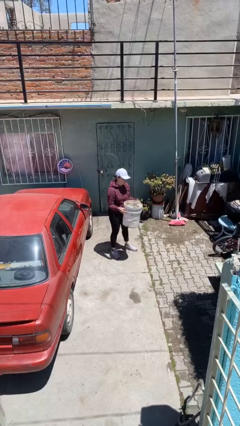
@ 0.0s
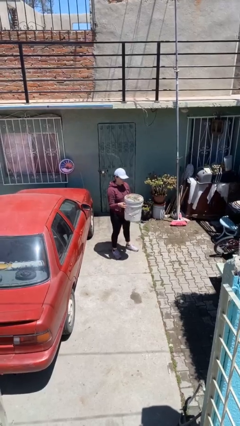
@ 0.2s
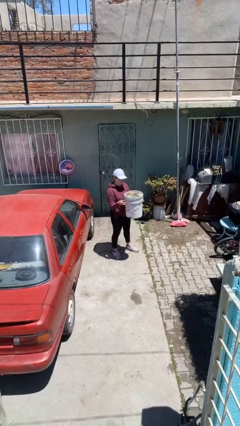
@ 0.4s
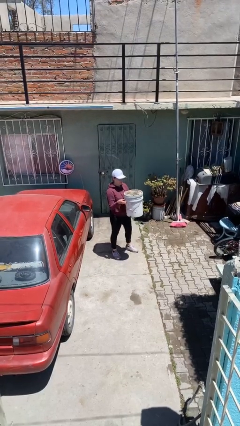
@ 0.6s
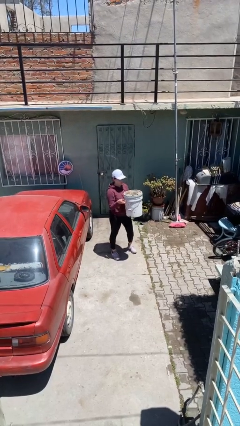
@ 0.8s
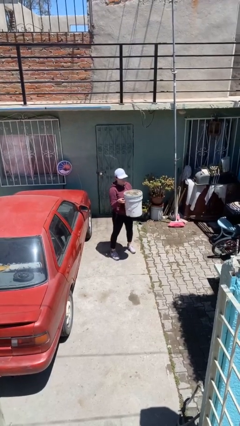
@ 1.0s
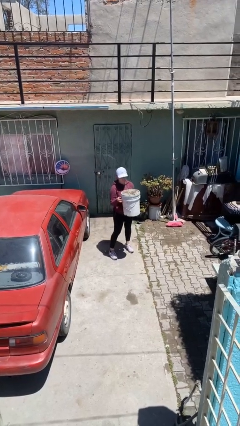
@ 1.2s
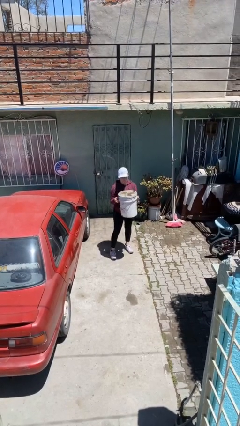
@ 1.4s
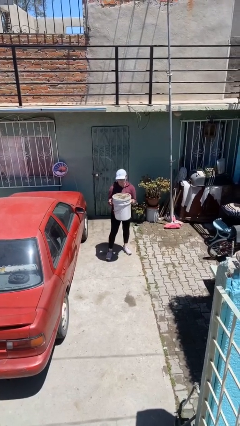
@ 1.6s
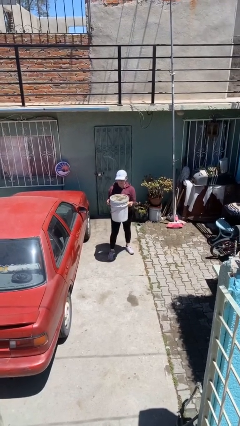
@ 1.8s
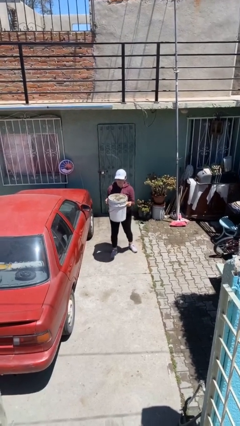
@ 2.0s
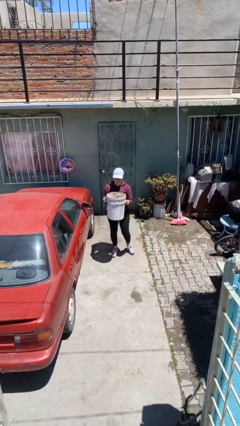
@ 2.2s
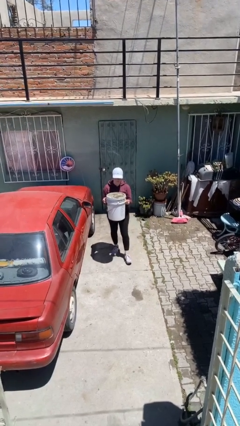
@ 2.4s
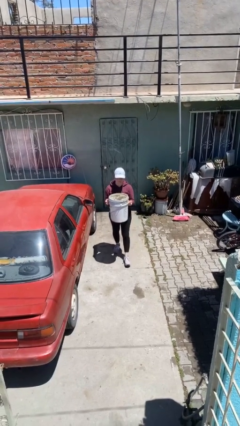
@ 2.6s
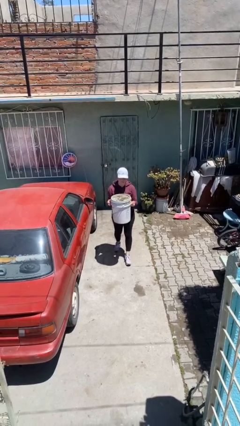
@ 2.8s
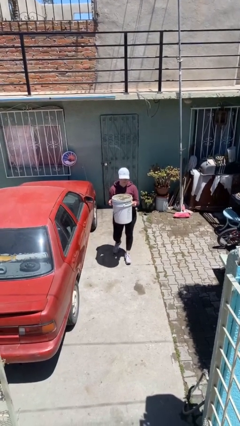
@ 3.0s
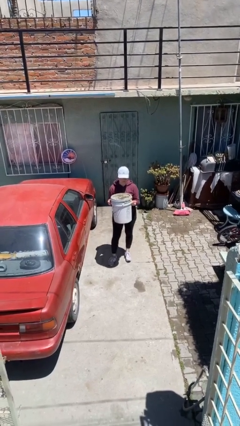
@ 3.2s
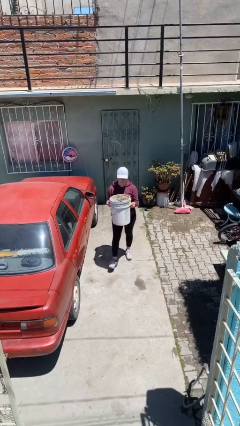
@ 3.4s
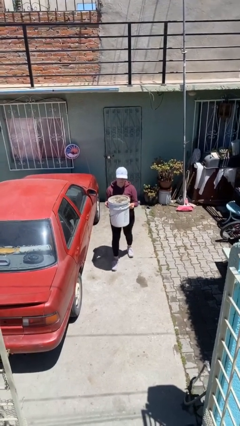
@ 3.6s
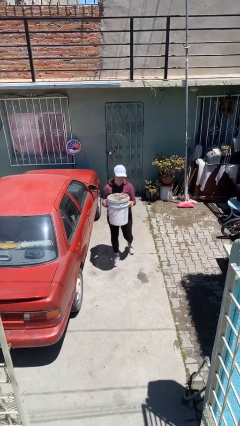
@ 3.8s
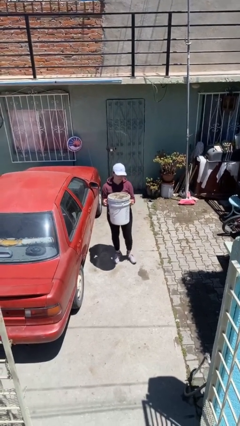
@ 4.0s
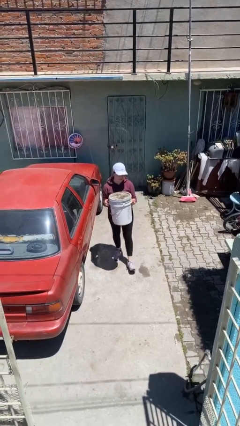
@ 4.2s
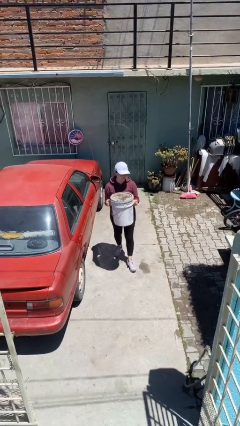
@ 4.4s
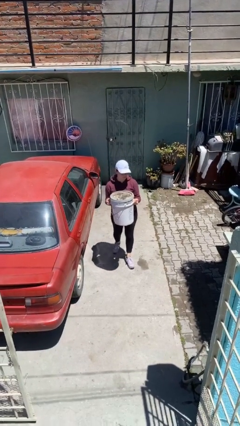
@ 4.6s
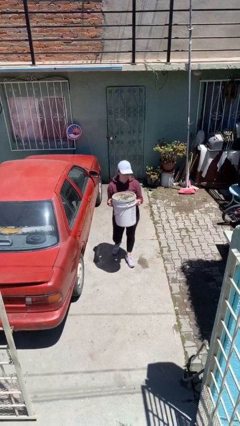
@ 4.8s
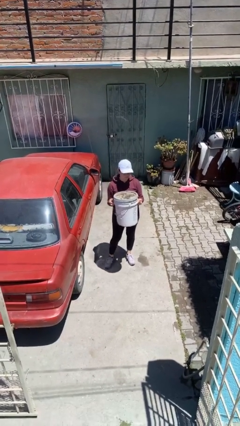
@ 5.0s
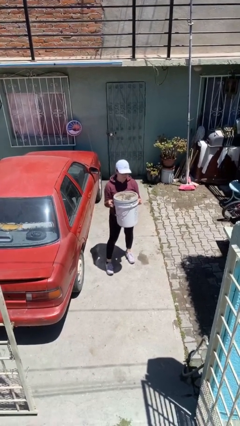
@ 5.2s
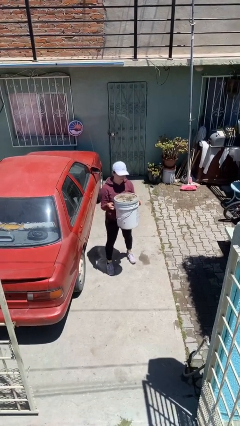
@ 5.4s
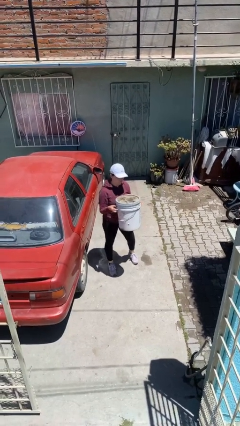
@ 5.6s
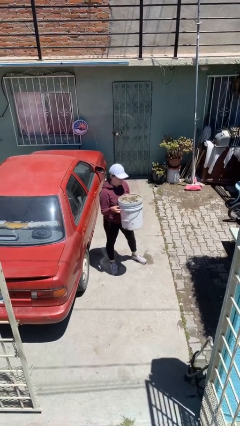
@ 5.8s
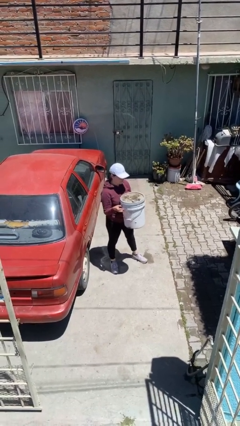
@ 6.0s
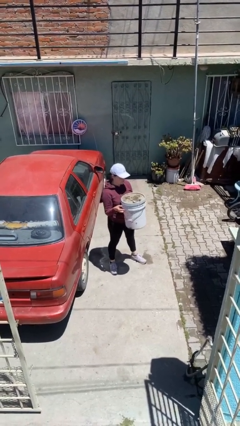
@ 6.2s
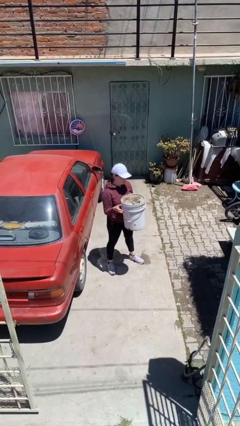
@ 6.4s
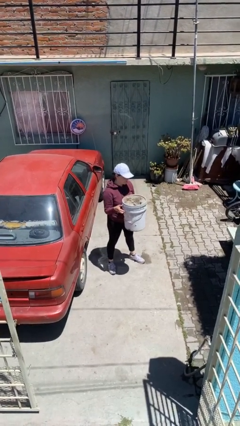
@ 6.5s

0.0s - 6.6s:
person carries heavy object

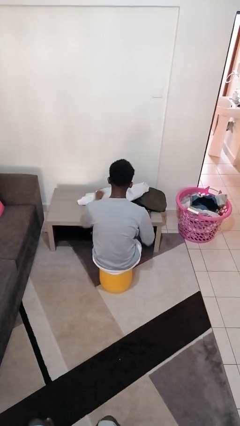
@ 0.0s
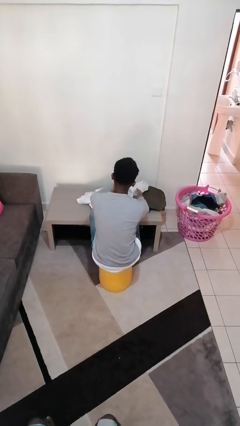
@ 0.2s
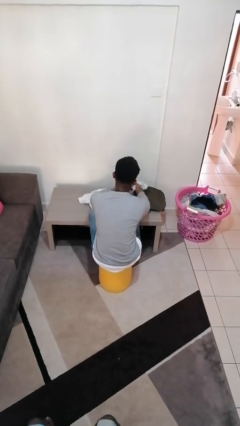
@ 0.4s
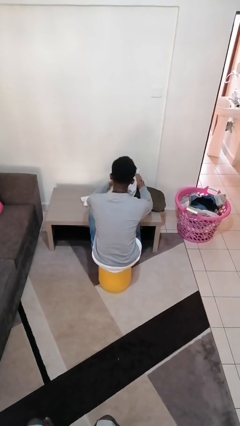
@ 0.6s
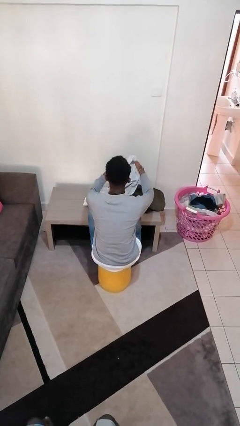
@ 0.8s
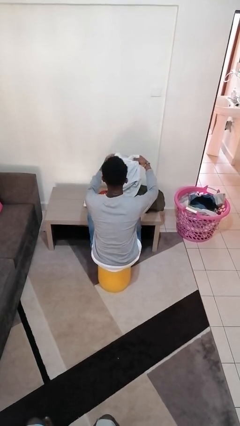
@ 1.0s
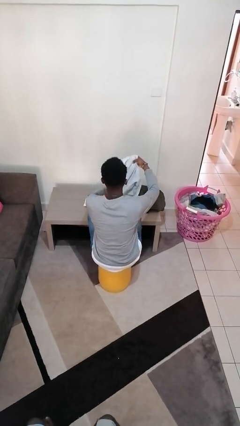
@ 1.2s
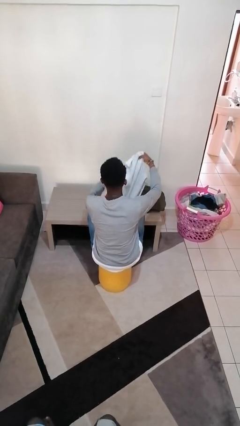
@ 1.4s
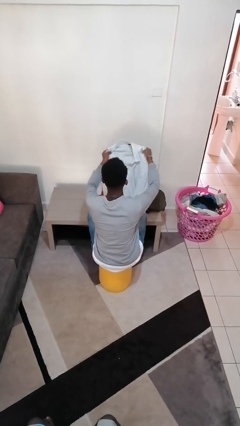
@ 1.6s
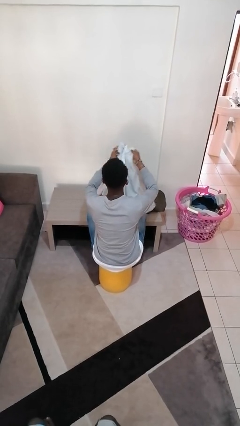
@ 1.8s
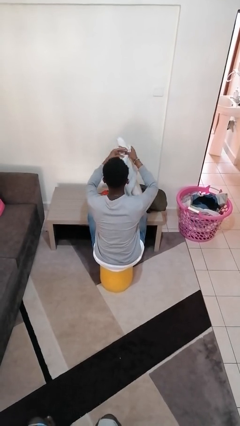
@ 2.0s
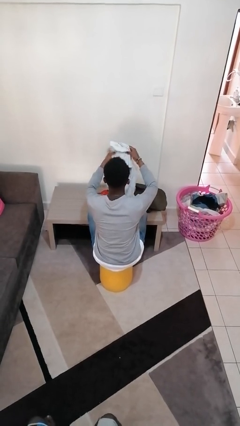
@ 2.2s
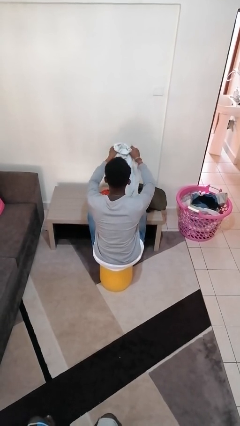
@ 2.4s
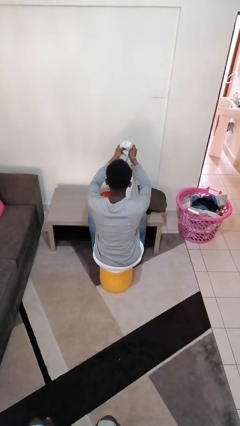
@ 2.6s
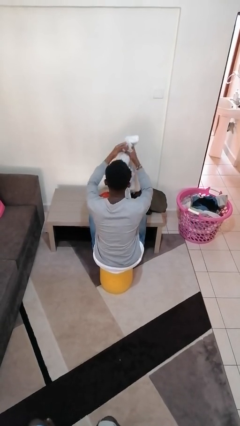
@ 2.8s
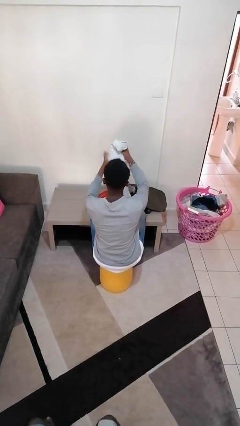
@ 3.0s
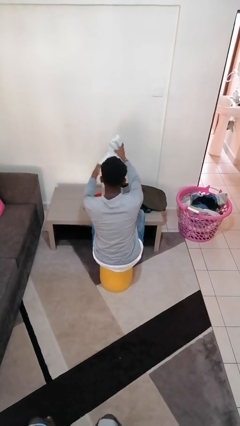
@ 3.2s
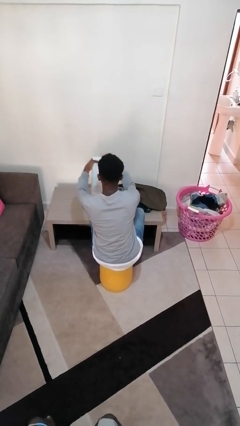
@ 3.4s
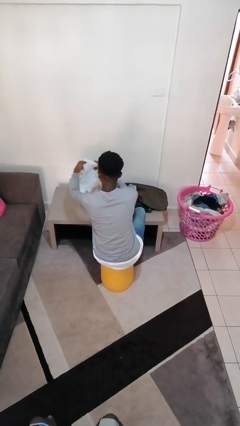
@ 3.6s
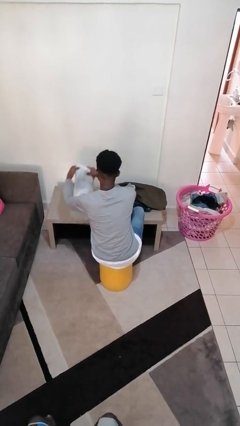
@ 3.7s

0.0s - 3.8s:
person folds shirt

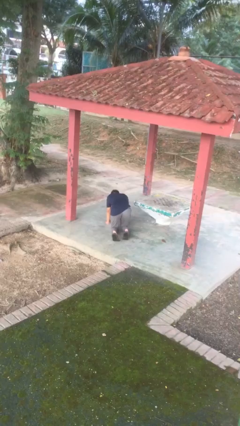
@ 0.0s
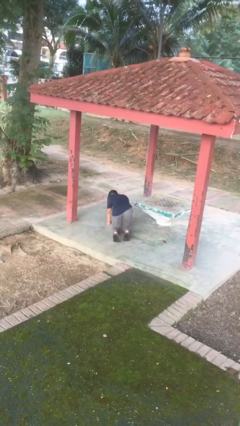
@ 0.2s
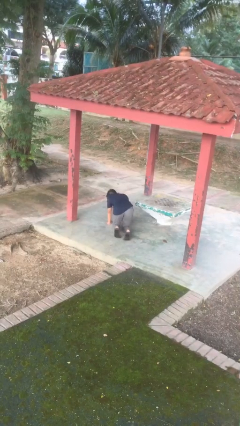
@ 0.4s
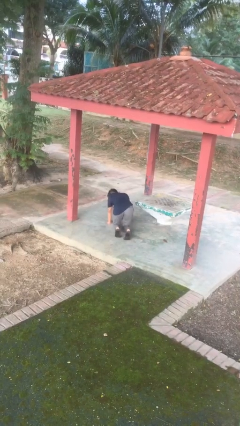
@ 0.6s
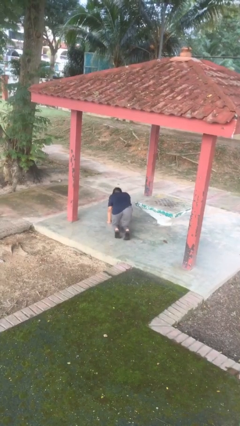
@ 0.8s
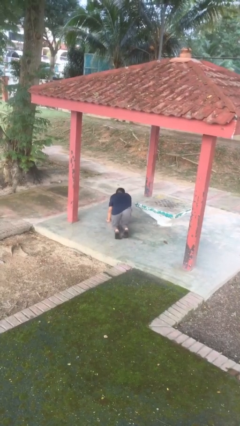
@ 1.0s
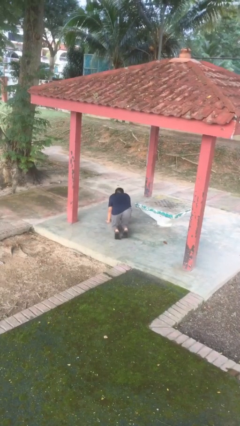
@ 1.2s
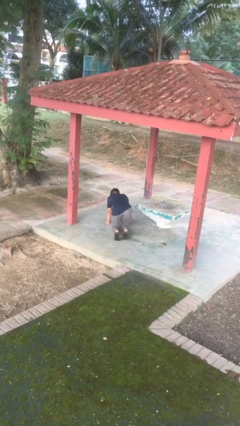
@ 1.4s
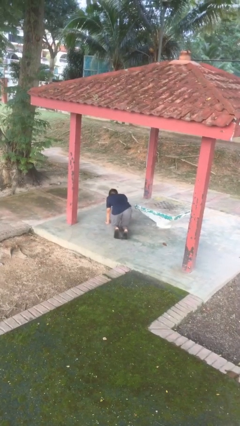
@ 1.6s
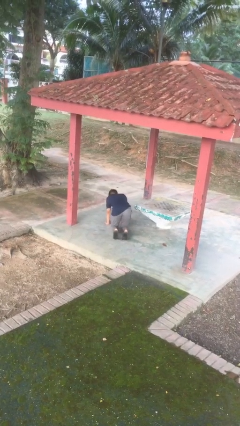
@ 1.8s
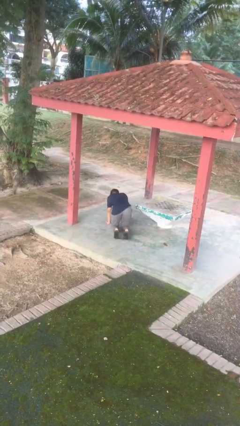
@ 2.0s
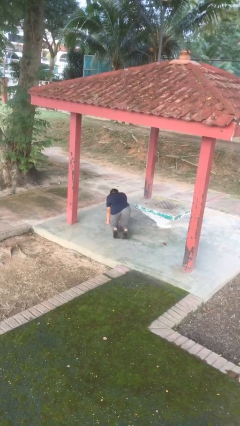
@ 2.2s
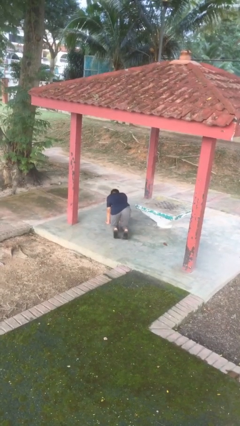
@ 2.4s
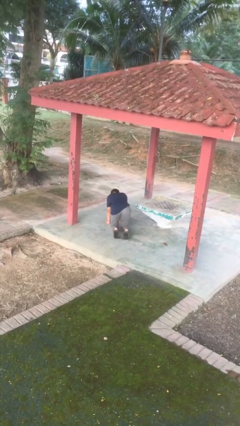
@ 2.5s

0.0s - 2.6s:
person crawls

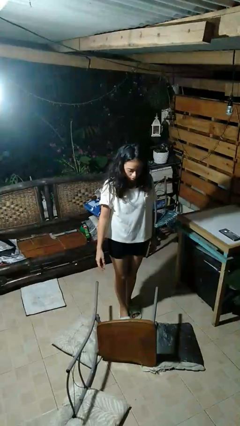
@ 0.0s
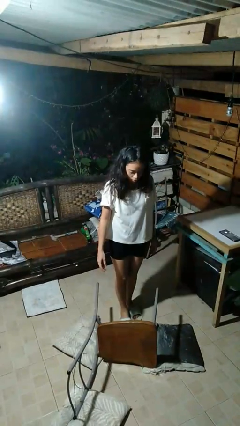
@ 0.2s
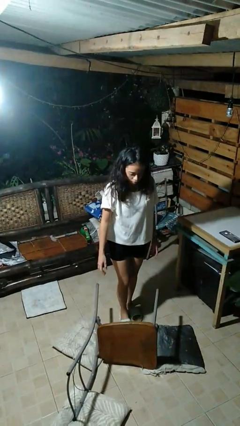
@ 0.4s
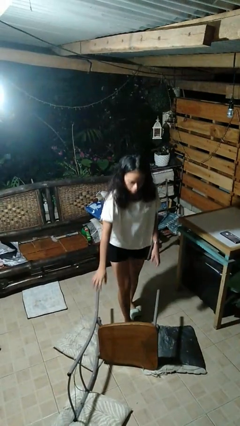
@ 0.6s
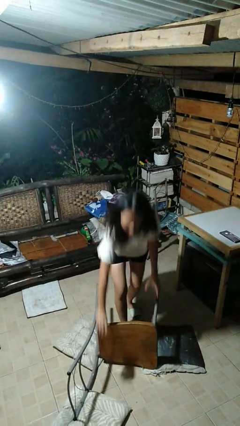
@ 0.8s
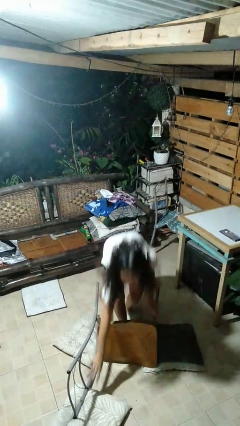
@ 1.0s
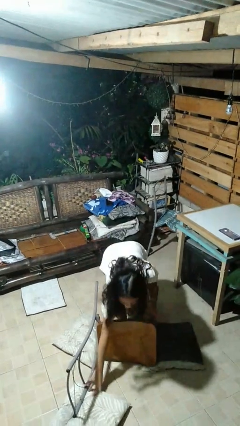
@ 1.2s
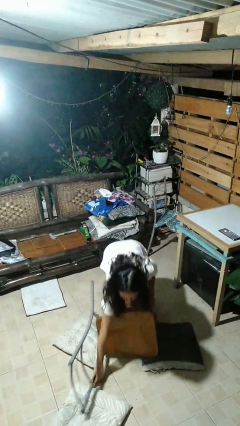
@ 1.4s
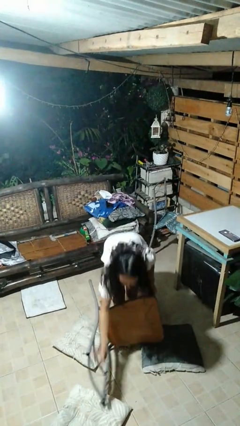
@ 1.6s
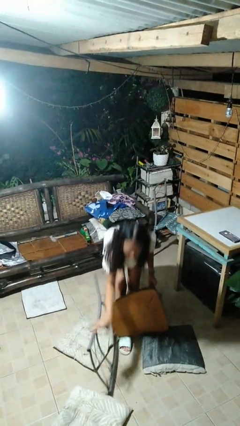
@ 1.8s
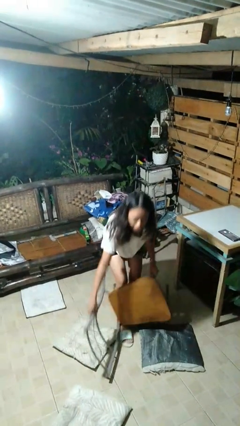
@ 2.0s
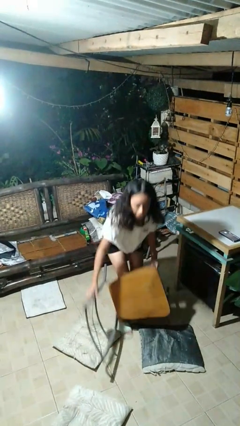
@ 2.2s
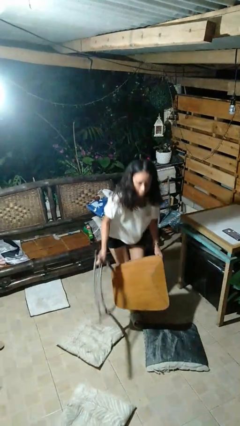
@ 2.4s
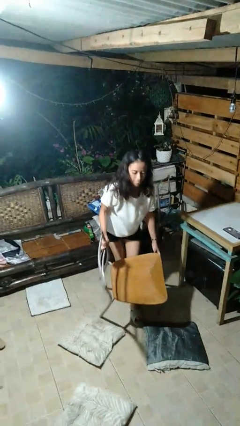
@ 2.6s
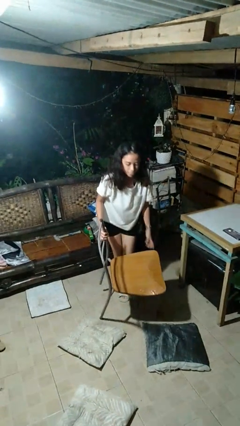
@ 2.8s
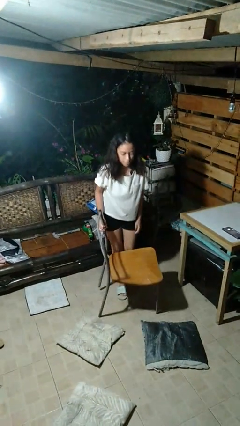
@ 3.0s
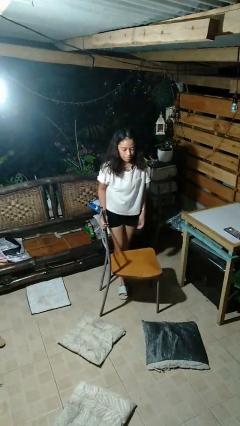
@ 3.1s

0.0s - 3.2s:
person sets upright furniture

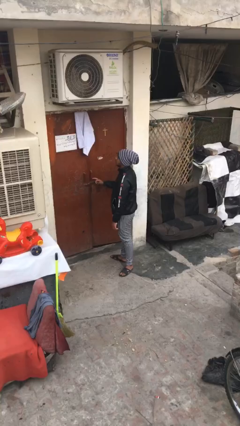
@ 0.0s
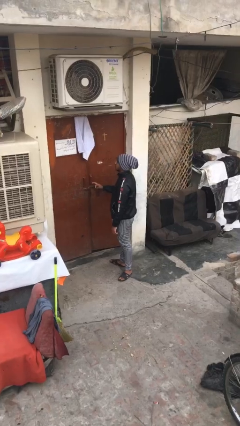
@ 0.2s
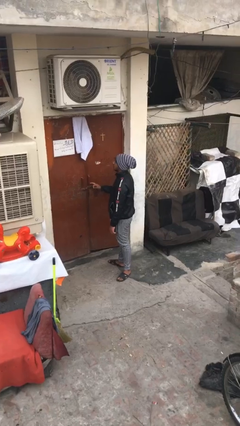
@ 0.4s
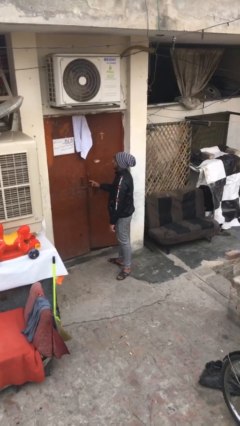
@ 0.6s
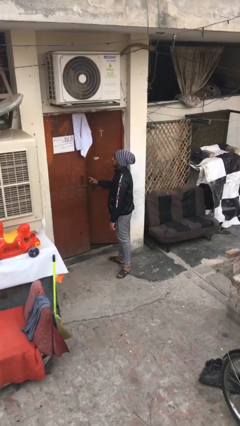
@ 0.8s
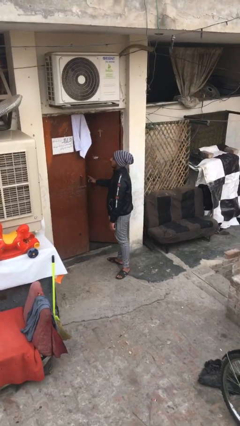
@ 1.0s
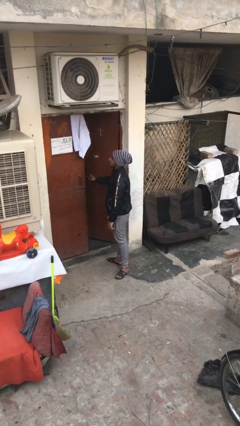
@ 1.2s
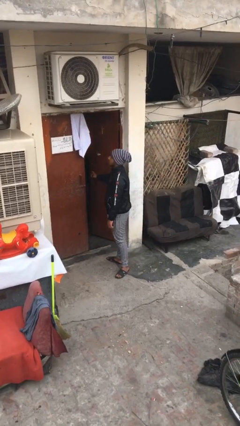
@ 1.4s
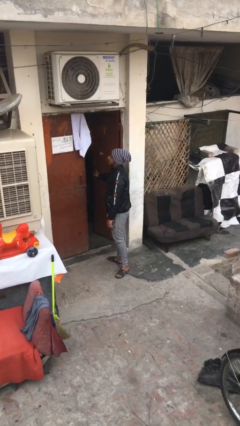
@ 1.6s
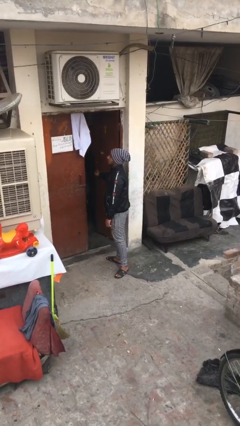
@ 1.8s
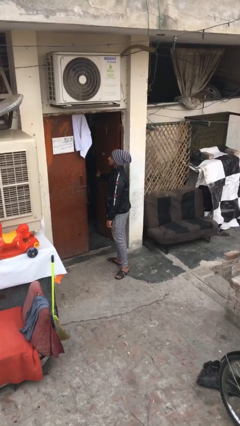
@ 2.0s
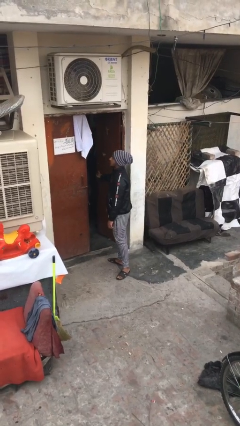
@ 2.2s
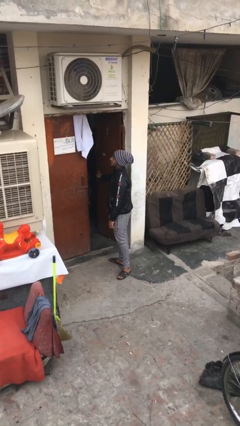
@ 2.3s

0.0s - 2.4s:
person opens facility door
